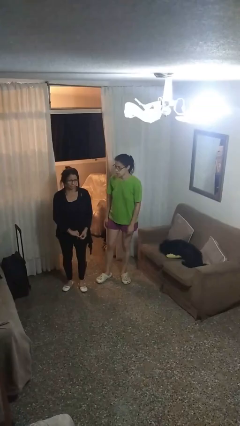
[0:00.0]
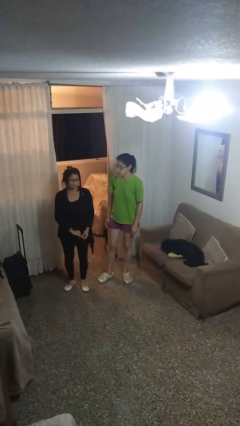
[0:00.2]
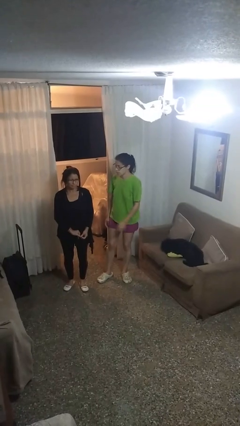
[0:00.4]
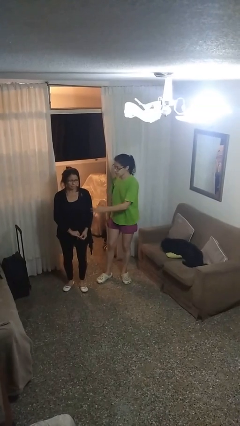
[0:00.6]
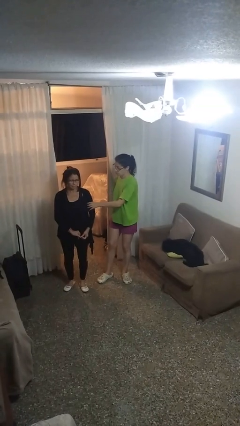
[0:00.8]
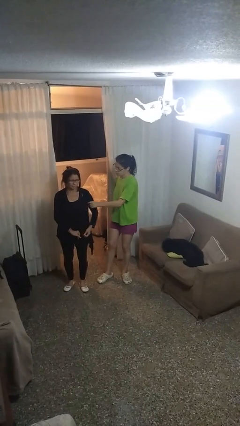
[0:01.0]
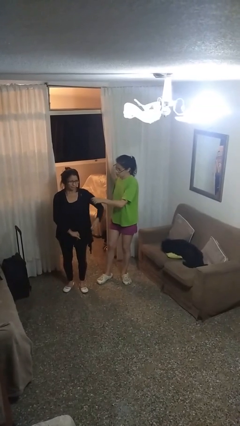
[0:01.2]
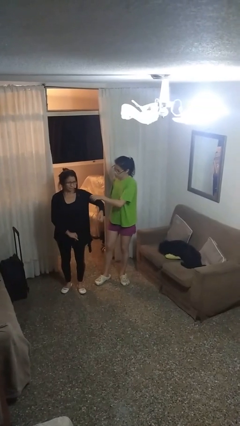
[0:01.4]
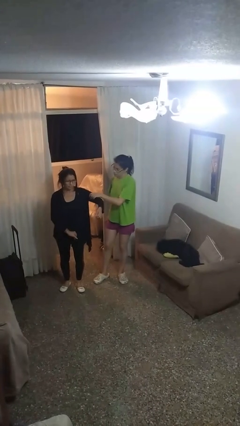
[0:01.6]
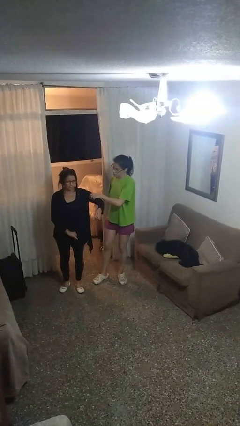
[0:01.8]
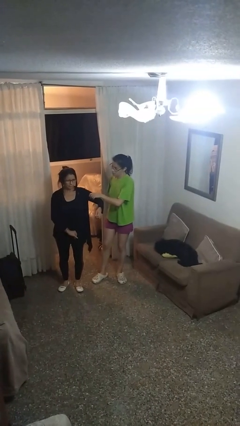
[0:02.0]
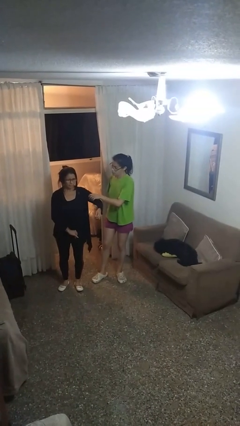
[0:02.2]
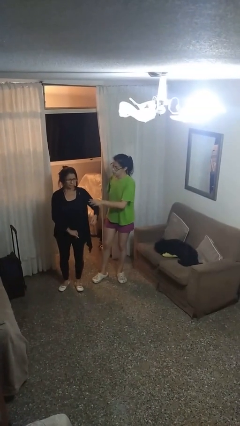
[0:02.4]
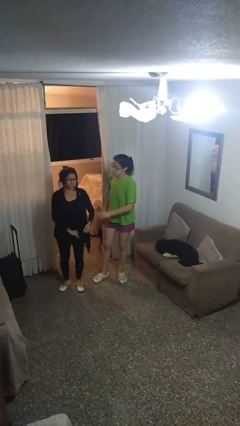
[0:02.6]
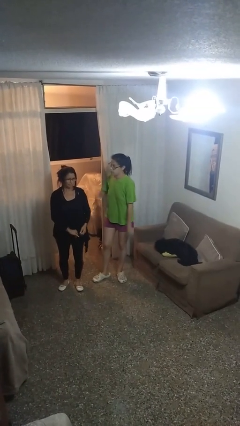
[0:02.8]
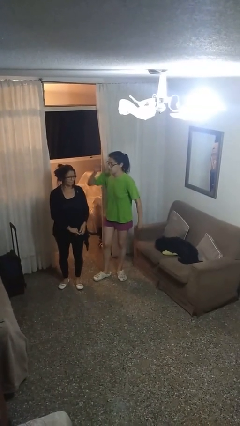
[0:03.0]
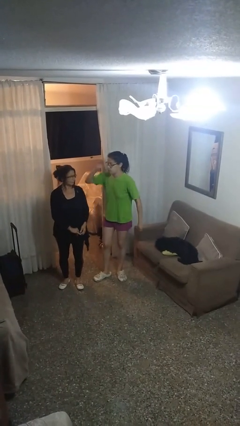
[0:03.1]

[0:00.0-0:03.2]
person grabs person by bicep

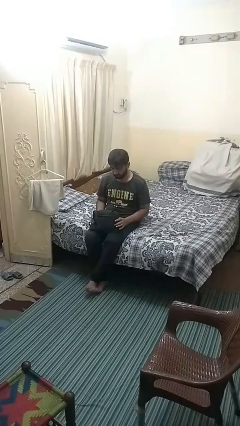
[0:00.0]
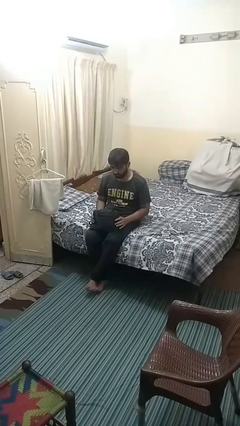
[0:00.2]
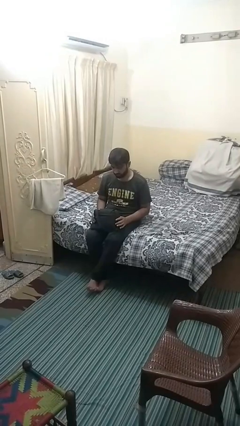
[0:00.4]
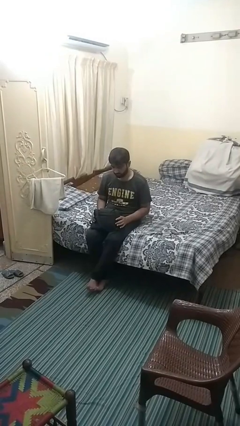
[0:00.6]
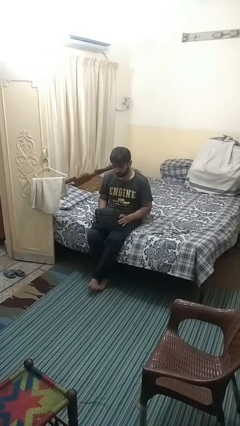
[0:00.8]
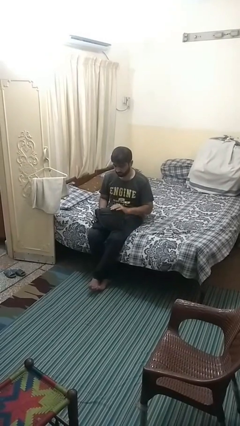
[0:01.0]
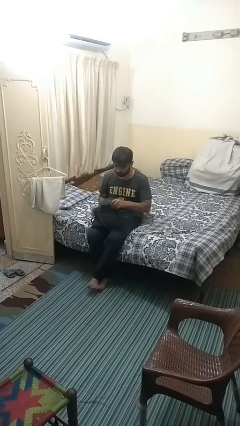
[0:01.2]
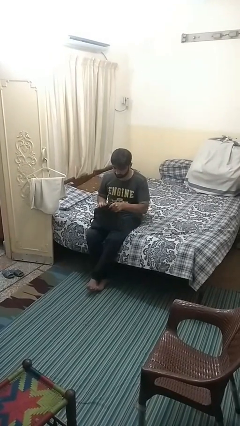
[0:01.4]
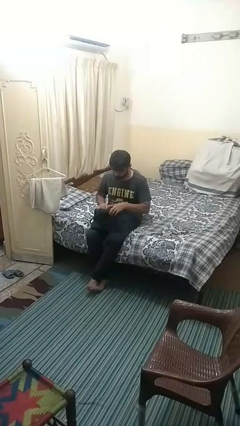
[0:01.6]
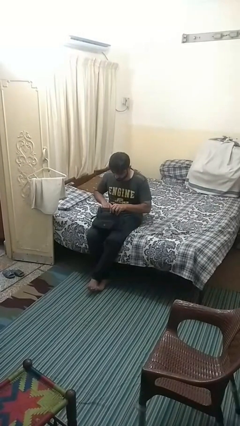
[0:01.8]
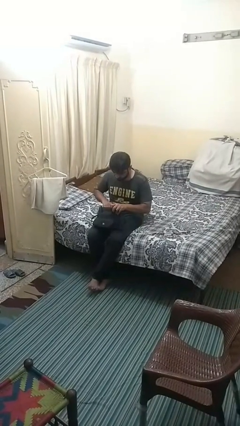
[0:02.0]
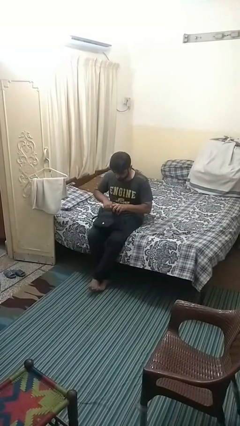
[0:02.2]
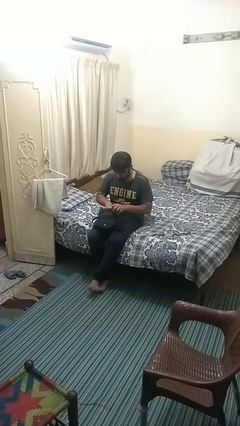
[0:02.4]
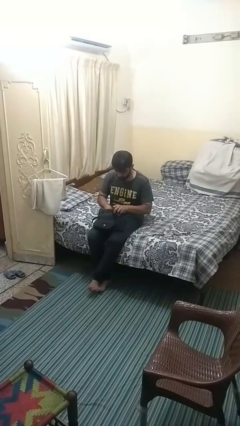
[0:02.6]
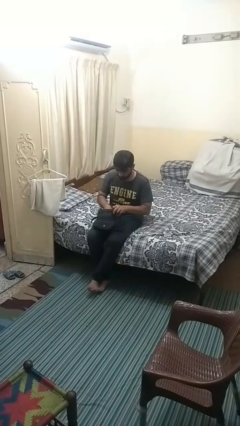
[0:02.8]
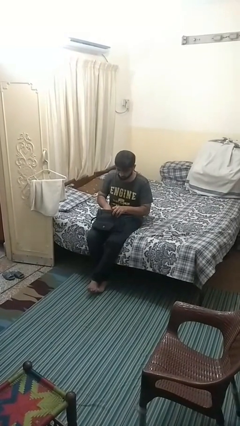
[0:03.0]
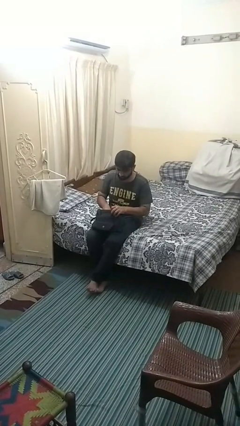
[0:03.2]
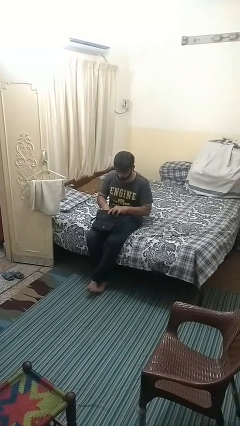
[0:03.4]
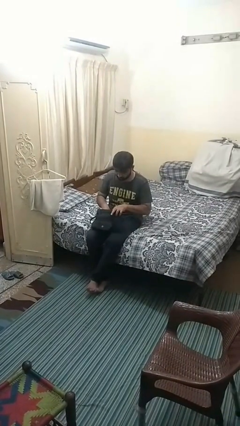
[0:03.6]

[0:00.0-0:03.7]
person searches in purse

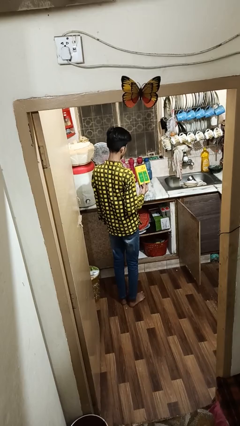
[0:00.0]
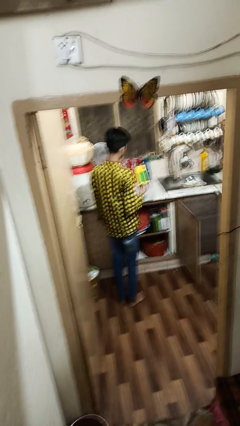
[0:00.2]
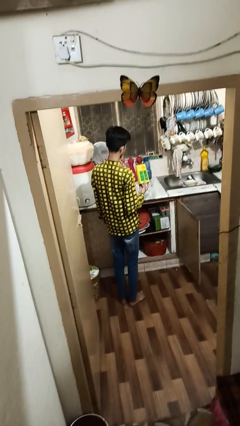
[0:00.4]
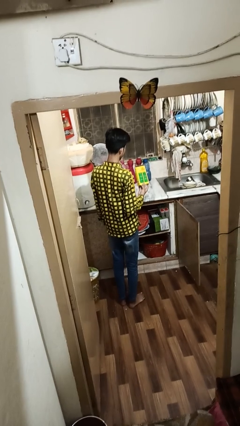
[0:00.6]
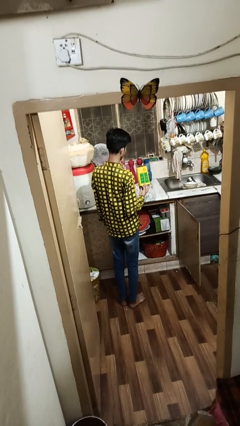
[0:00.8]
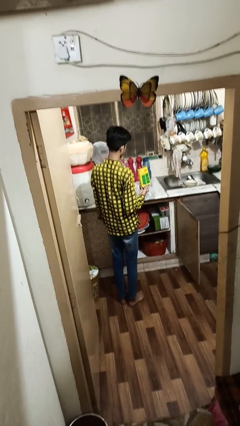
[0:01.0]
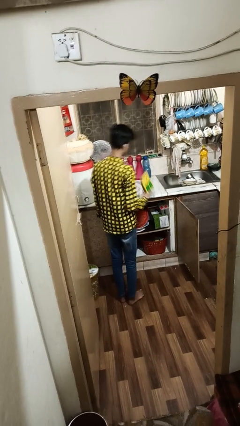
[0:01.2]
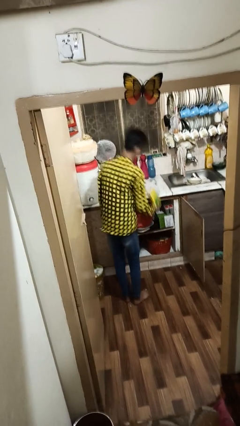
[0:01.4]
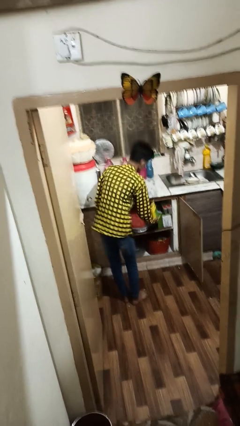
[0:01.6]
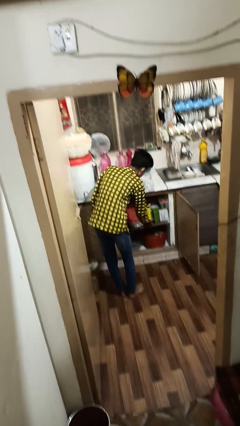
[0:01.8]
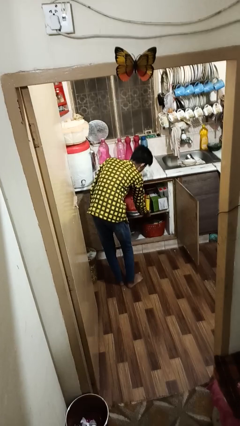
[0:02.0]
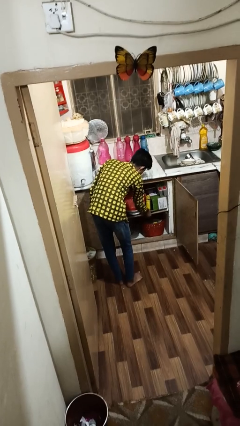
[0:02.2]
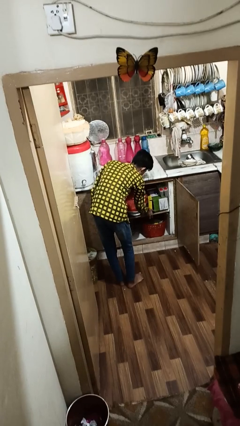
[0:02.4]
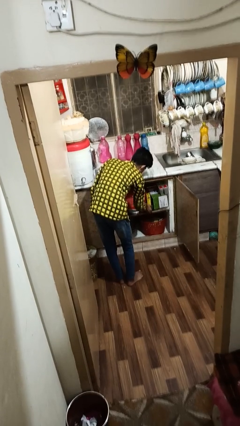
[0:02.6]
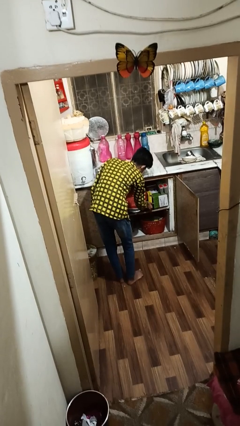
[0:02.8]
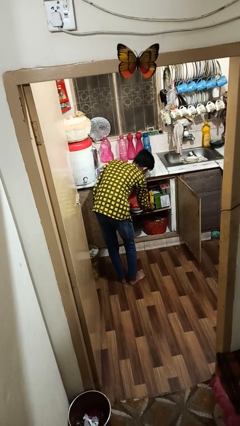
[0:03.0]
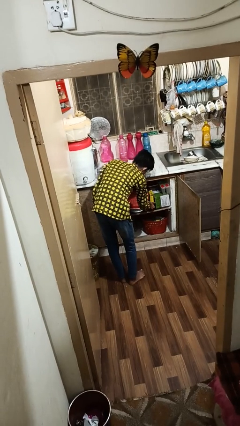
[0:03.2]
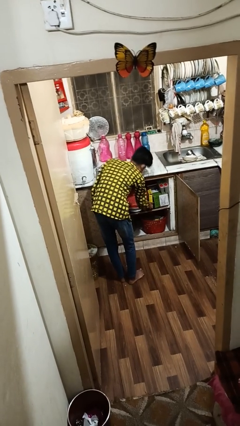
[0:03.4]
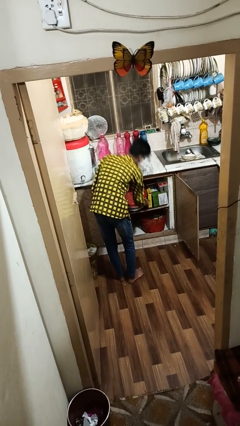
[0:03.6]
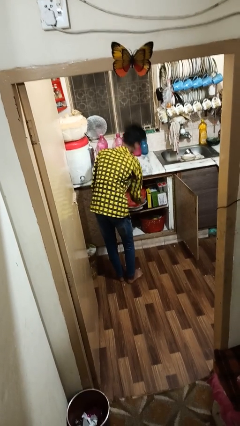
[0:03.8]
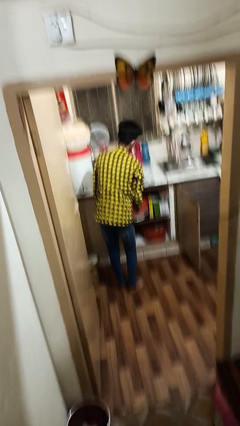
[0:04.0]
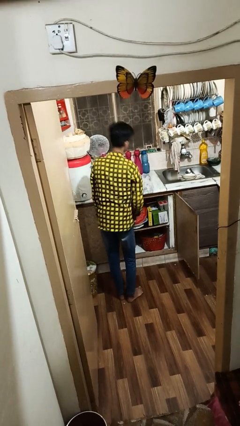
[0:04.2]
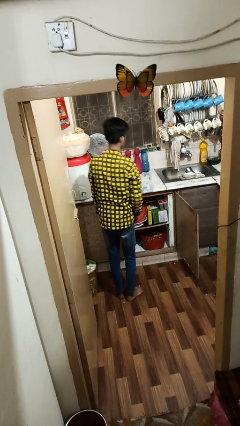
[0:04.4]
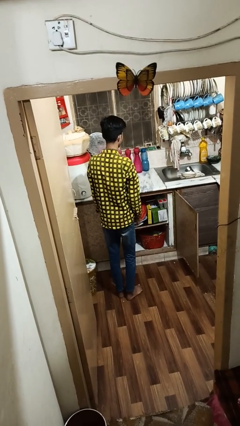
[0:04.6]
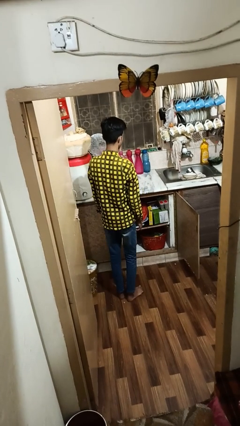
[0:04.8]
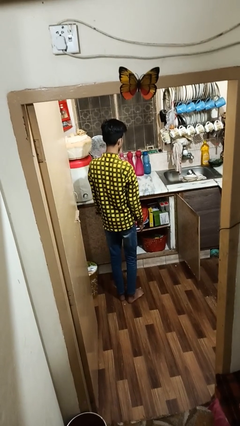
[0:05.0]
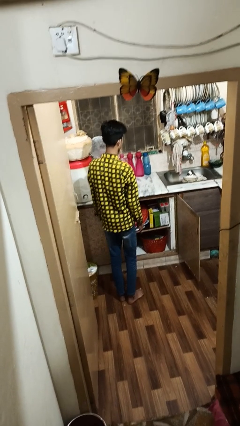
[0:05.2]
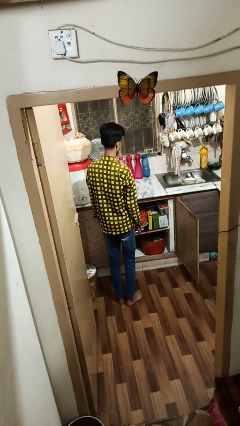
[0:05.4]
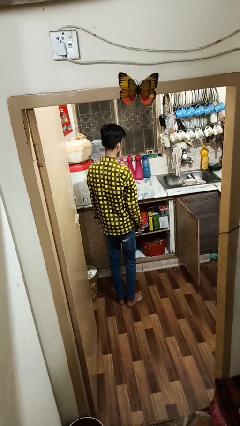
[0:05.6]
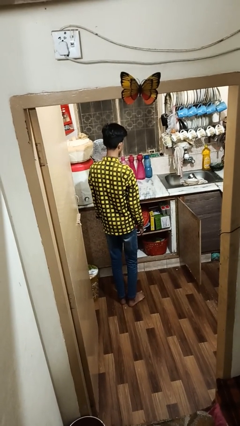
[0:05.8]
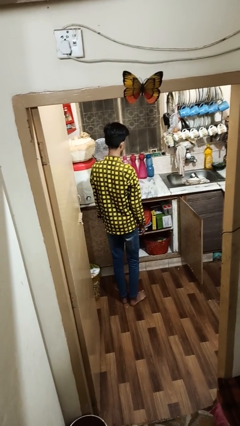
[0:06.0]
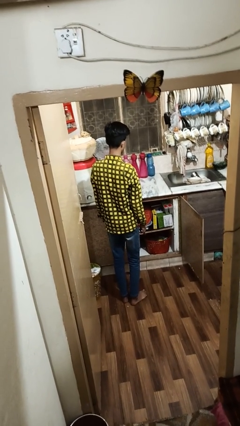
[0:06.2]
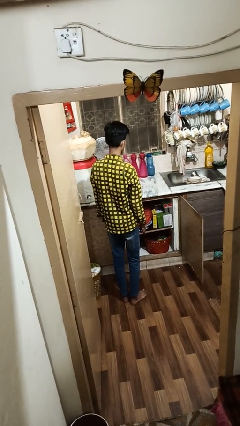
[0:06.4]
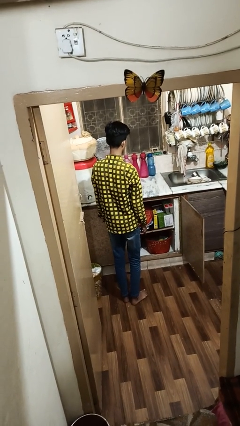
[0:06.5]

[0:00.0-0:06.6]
person puts object in cabinet

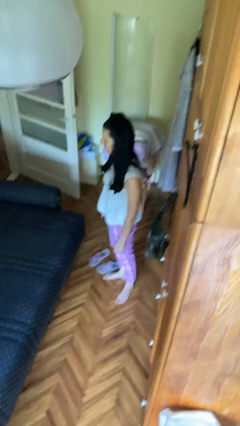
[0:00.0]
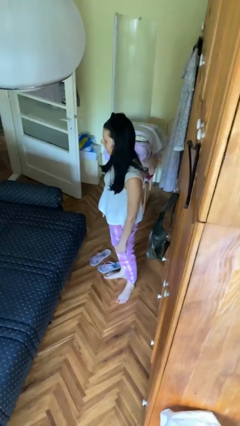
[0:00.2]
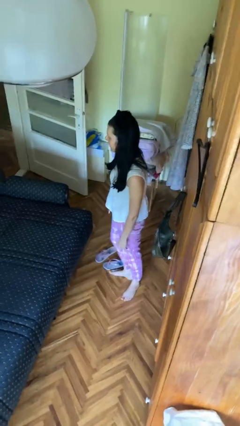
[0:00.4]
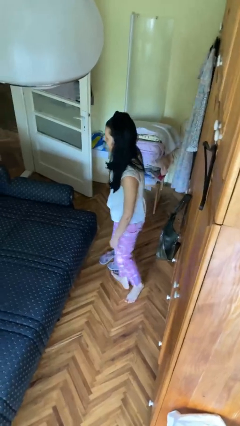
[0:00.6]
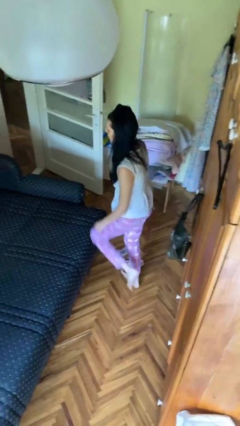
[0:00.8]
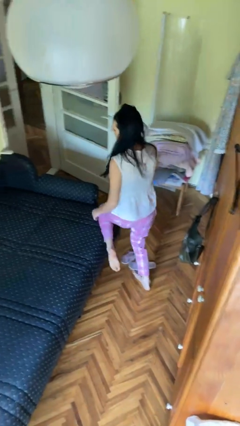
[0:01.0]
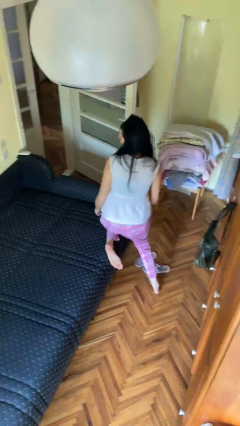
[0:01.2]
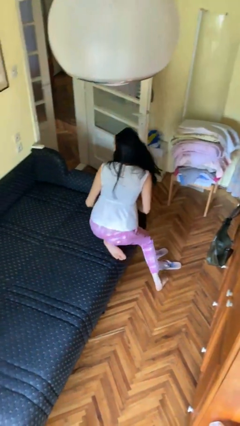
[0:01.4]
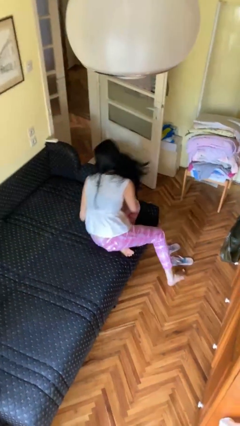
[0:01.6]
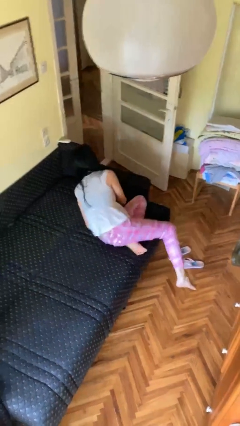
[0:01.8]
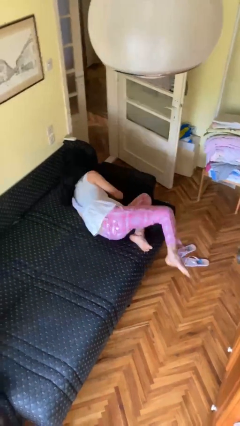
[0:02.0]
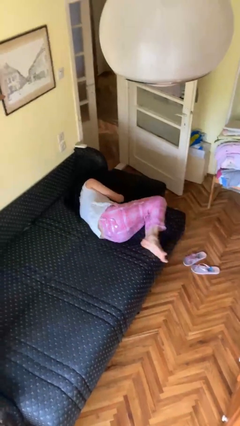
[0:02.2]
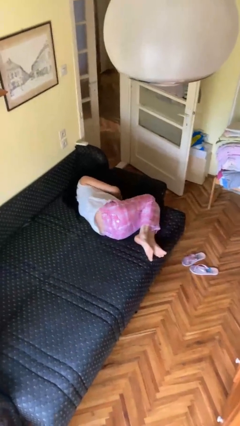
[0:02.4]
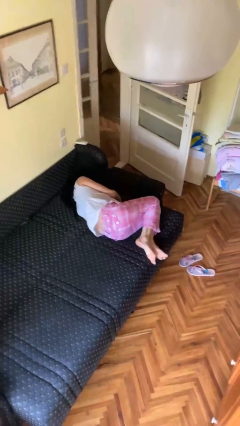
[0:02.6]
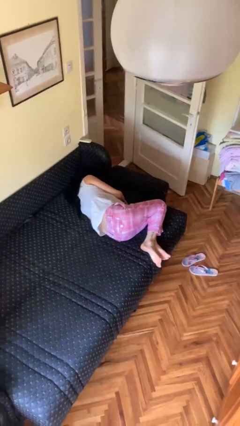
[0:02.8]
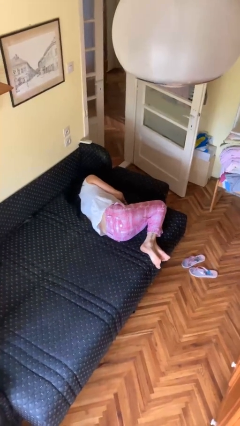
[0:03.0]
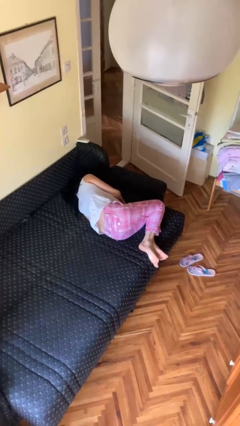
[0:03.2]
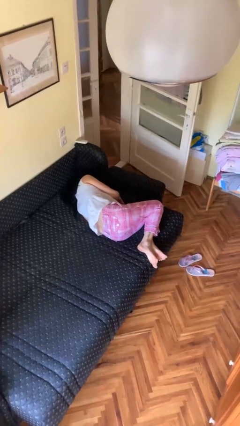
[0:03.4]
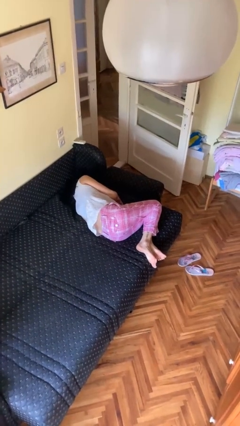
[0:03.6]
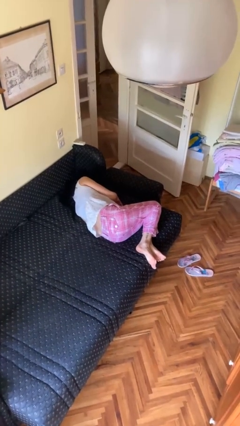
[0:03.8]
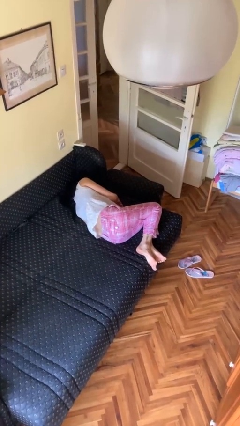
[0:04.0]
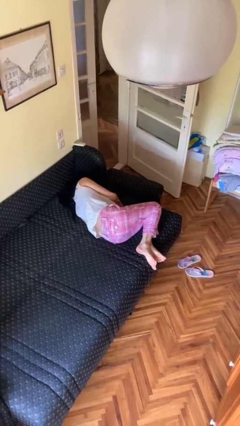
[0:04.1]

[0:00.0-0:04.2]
person lies down on bed
